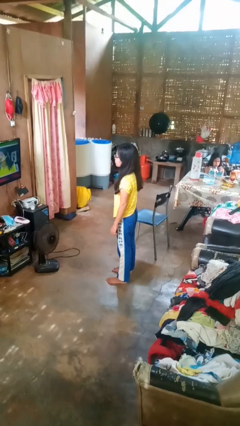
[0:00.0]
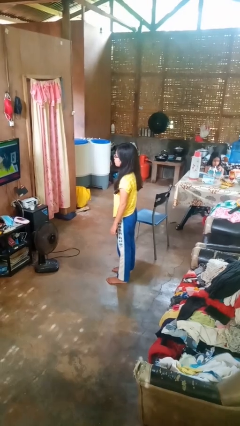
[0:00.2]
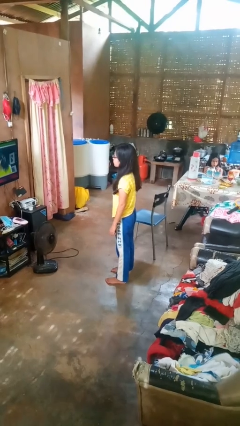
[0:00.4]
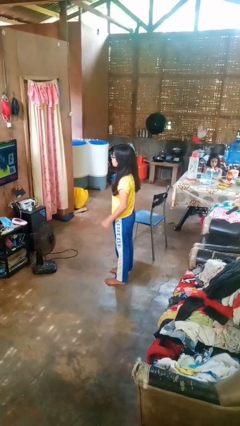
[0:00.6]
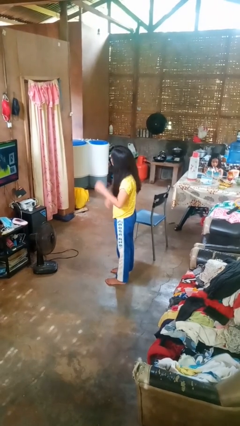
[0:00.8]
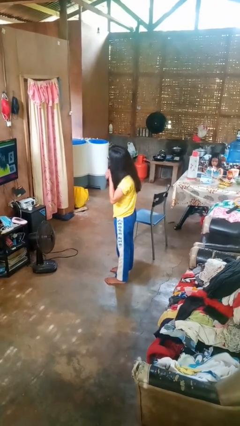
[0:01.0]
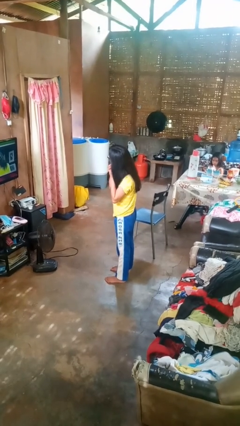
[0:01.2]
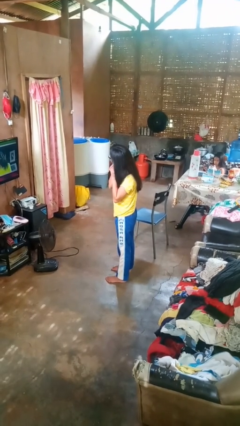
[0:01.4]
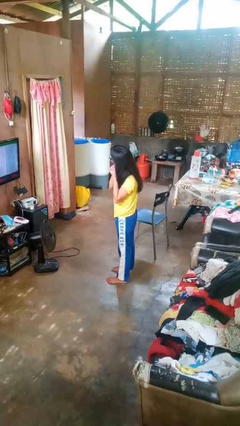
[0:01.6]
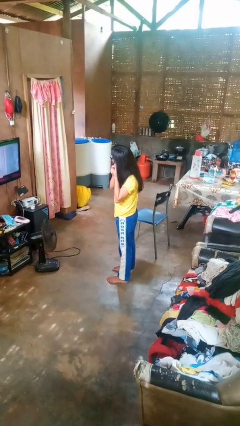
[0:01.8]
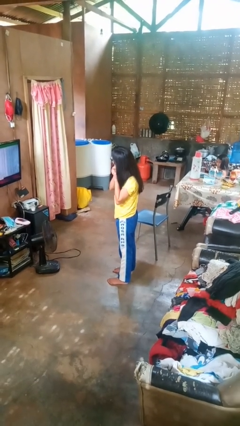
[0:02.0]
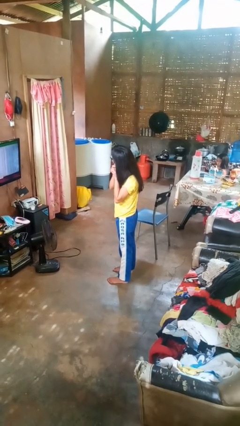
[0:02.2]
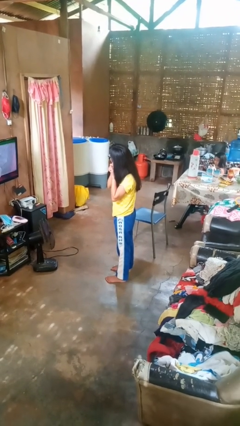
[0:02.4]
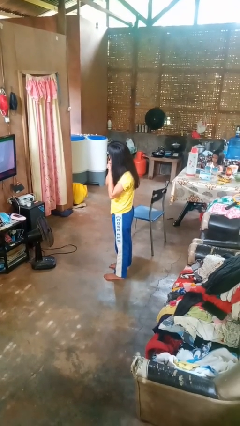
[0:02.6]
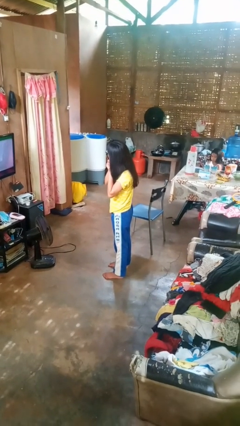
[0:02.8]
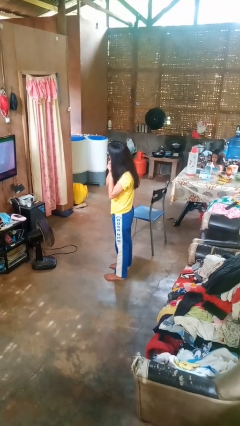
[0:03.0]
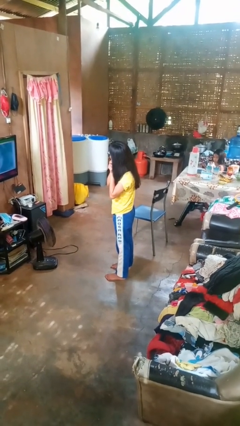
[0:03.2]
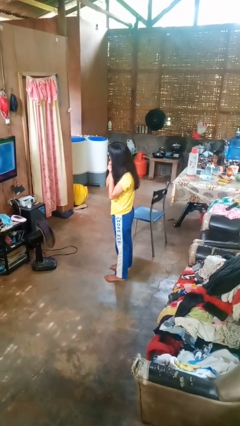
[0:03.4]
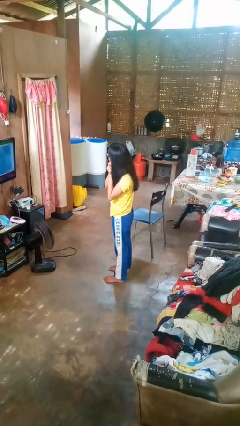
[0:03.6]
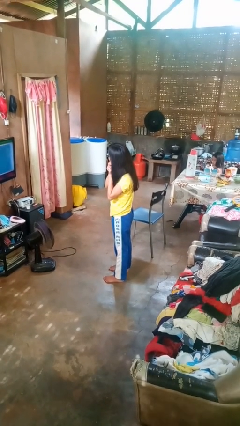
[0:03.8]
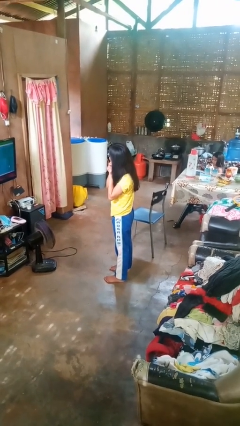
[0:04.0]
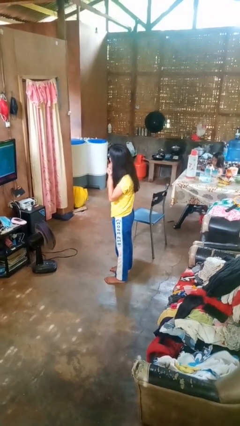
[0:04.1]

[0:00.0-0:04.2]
person puts on earrings

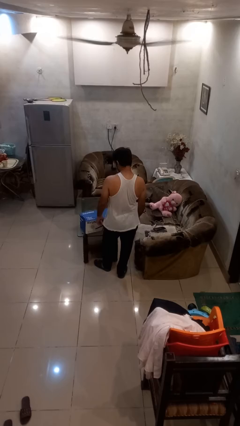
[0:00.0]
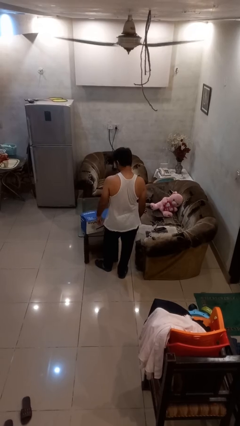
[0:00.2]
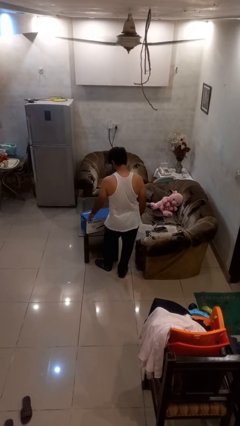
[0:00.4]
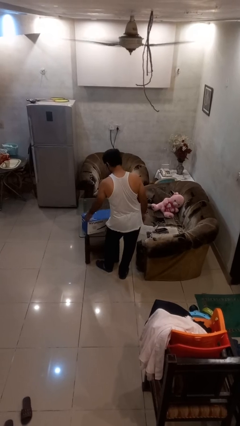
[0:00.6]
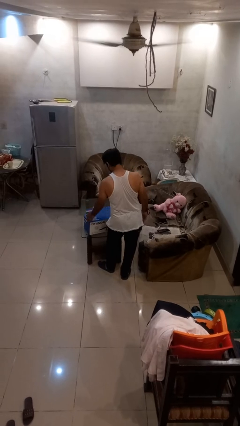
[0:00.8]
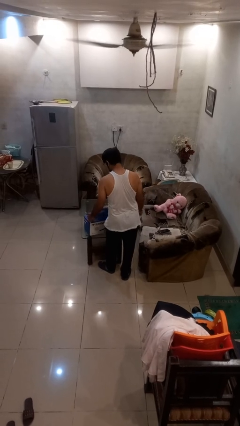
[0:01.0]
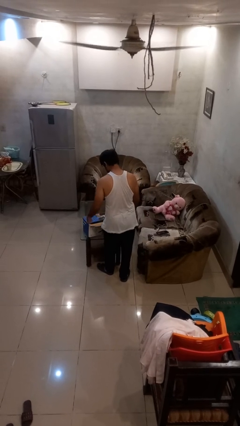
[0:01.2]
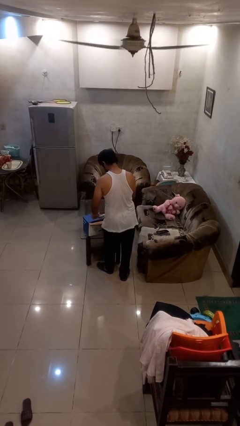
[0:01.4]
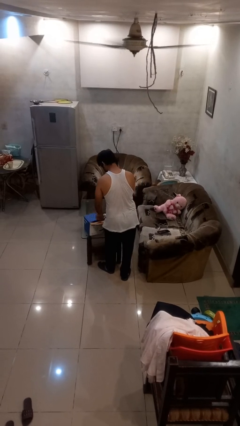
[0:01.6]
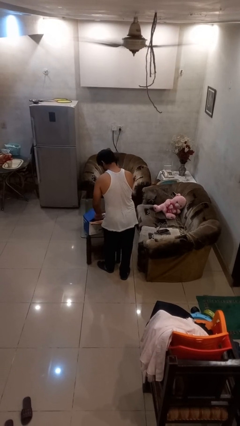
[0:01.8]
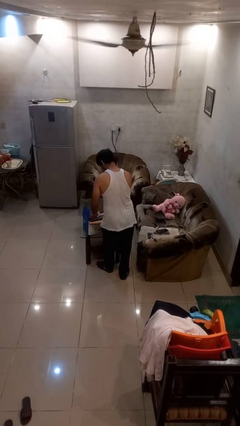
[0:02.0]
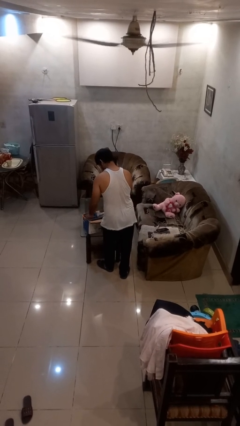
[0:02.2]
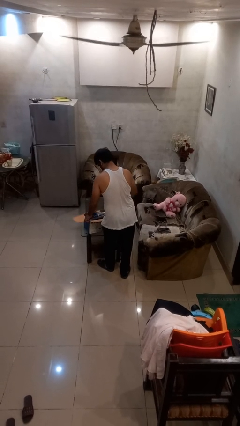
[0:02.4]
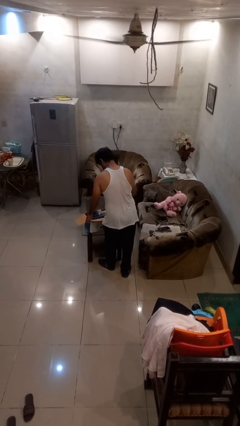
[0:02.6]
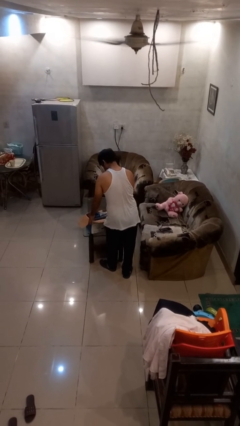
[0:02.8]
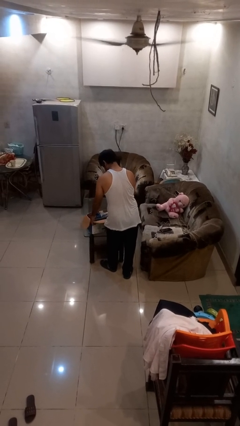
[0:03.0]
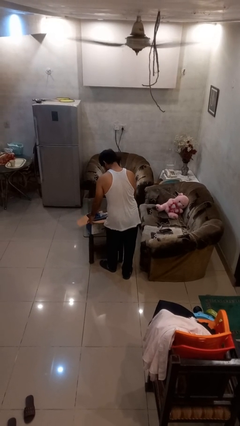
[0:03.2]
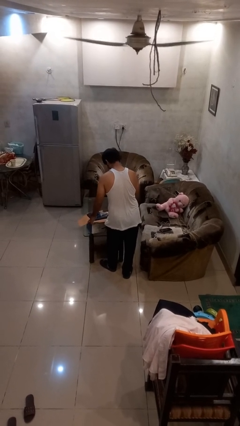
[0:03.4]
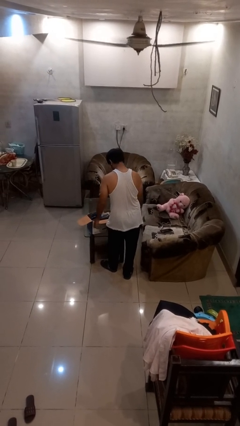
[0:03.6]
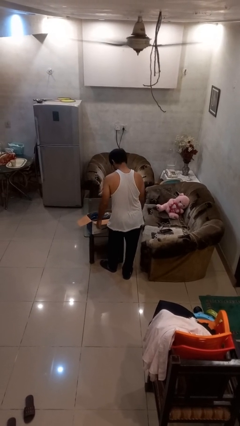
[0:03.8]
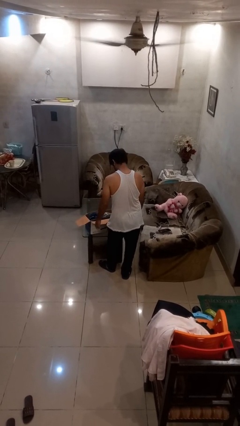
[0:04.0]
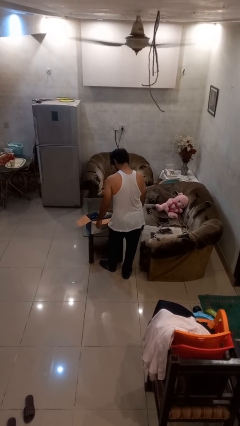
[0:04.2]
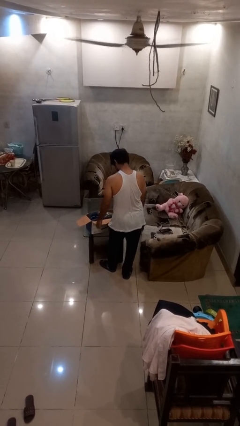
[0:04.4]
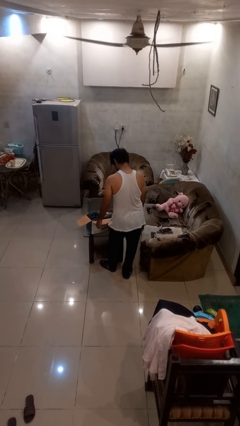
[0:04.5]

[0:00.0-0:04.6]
person opens box

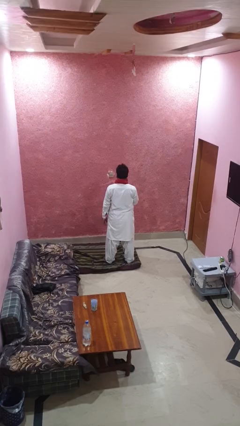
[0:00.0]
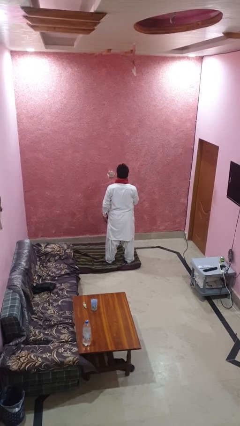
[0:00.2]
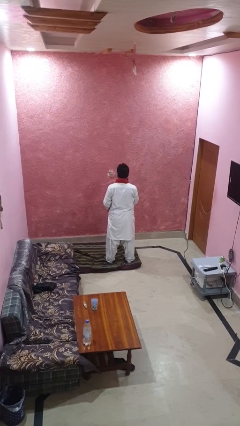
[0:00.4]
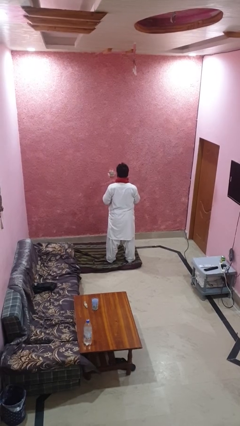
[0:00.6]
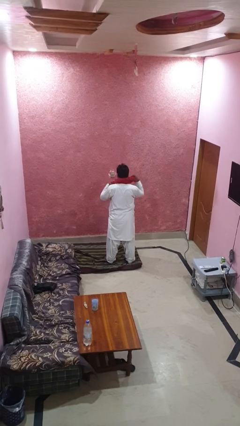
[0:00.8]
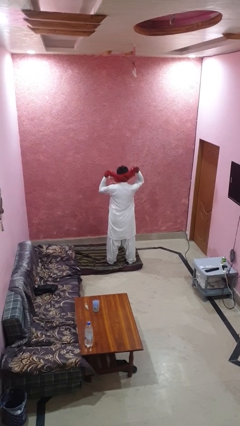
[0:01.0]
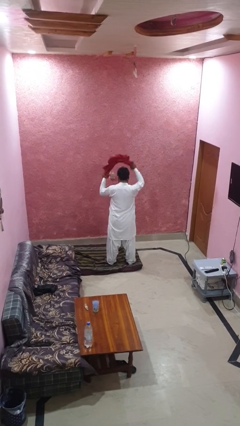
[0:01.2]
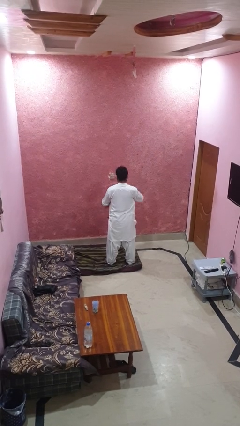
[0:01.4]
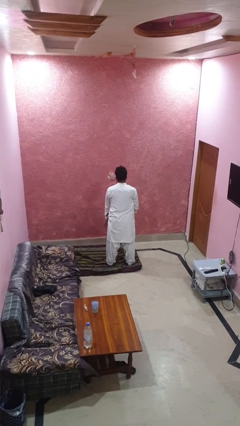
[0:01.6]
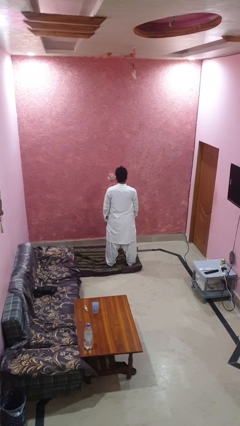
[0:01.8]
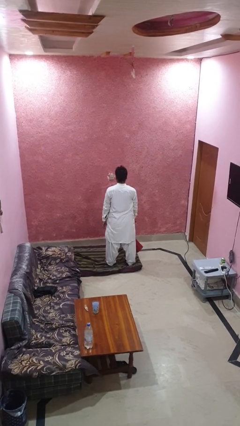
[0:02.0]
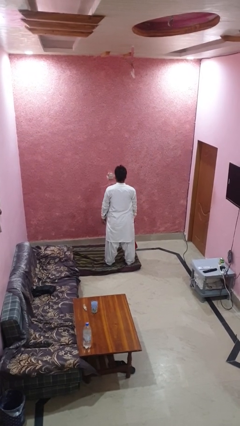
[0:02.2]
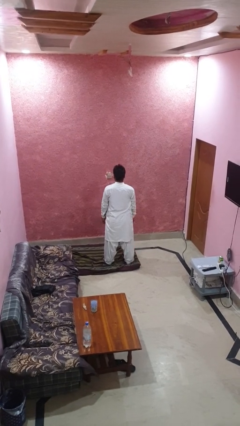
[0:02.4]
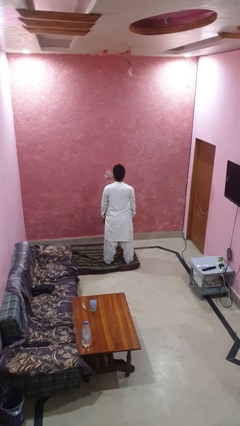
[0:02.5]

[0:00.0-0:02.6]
person takes off scarf

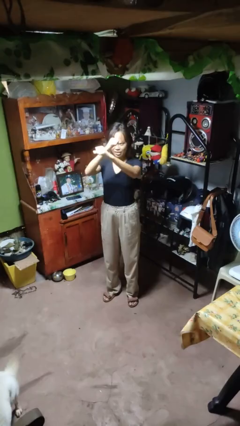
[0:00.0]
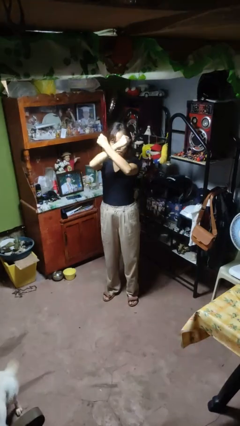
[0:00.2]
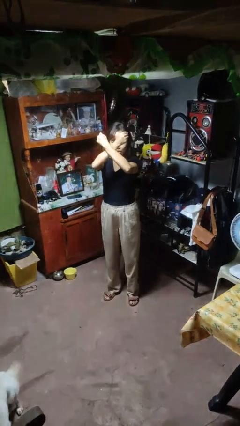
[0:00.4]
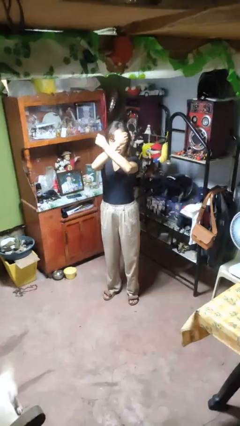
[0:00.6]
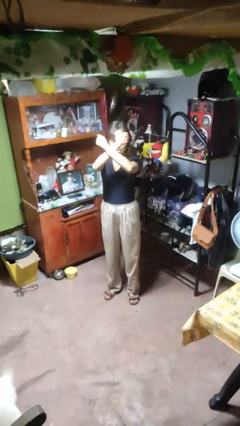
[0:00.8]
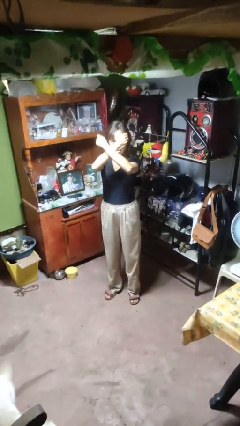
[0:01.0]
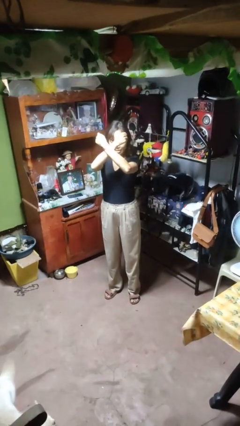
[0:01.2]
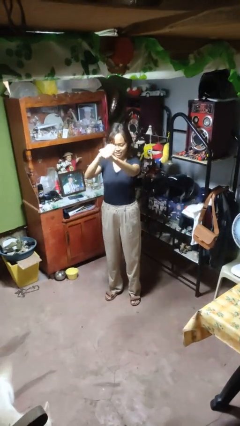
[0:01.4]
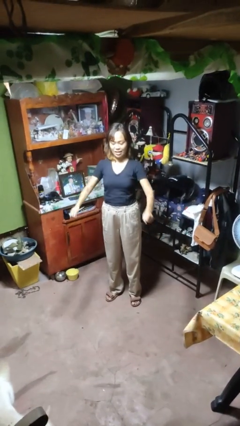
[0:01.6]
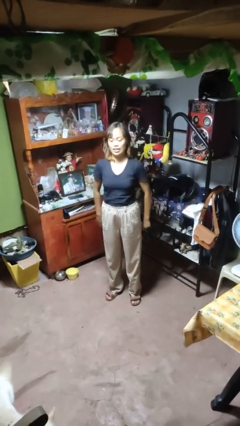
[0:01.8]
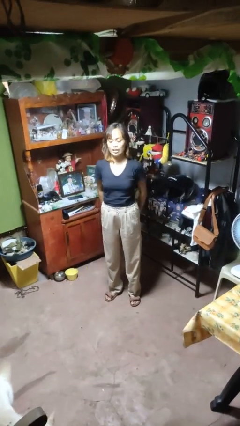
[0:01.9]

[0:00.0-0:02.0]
person gestures arms x

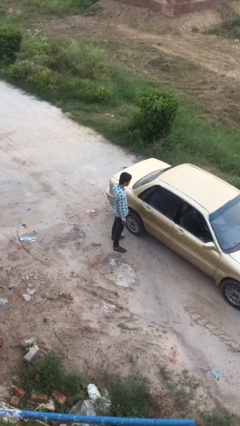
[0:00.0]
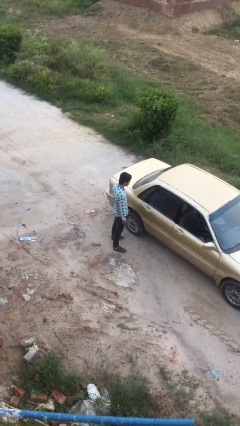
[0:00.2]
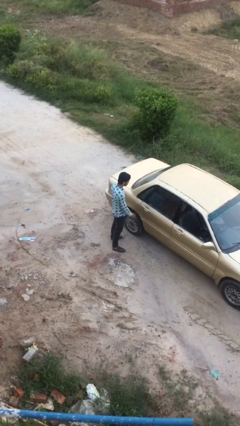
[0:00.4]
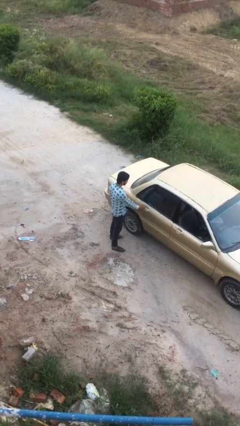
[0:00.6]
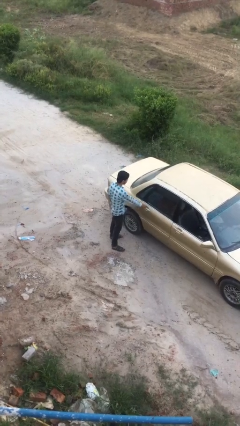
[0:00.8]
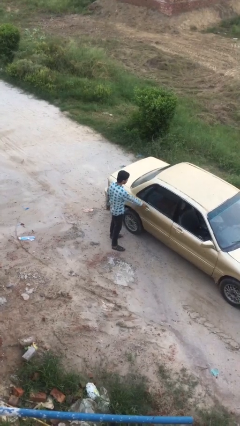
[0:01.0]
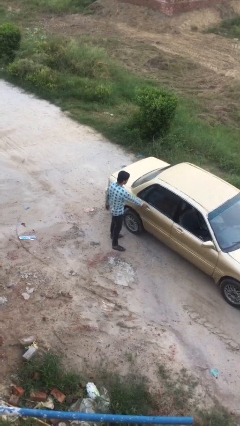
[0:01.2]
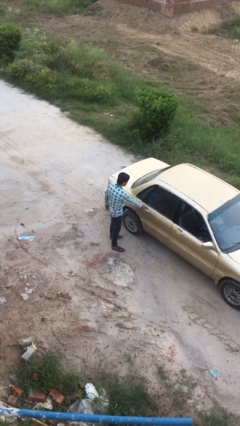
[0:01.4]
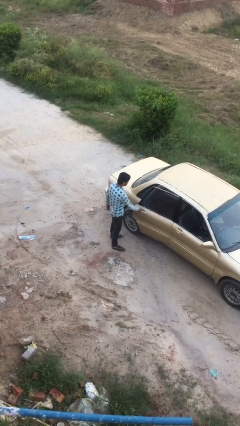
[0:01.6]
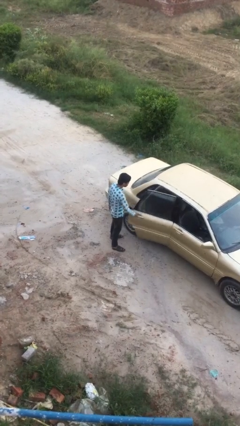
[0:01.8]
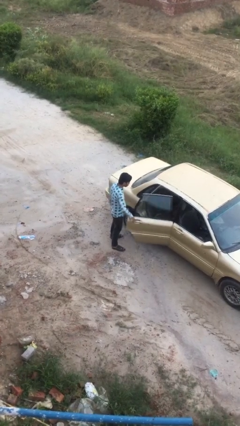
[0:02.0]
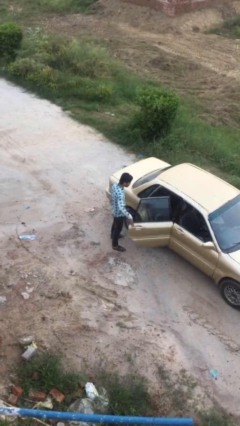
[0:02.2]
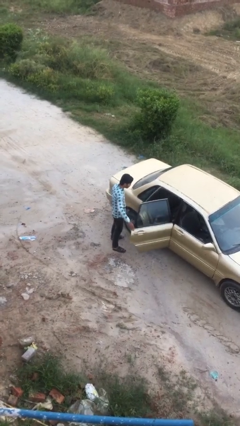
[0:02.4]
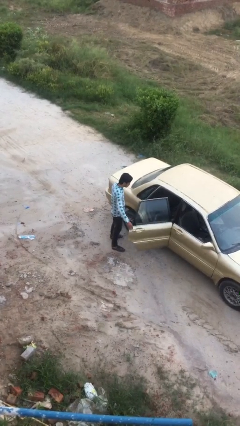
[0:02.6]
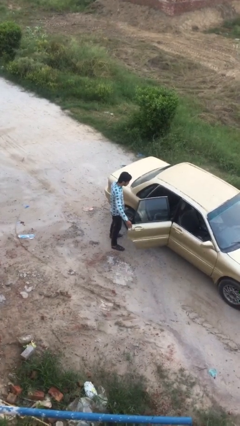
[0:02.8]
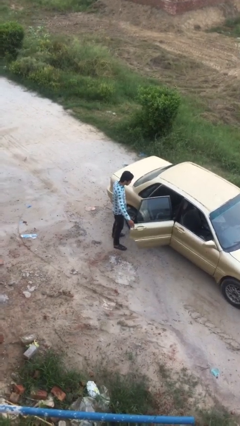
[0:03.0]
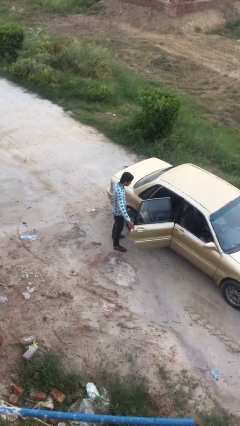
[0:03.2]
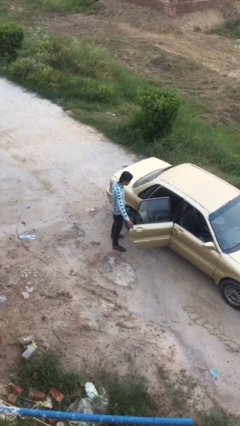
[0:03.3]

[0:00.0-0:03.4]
person opens car door

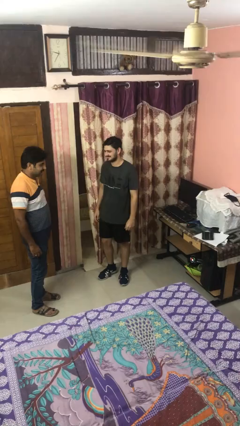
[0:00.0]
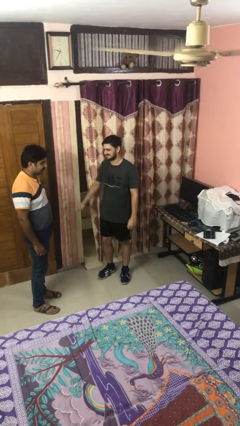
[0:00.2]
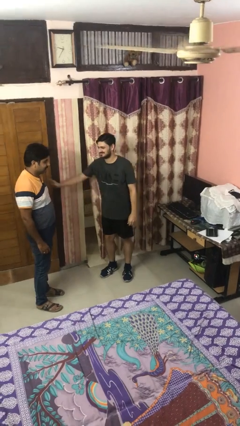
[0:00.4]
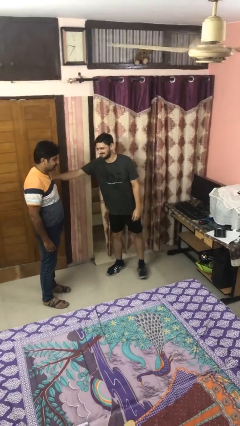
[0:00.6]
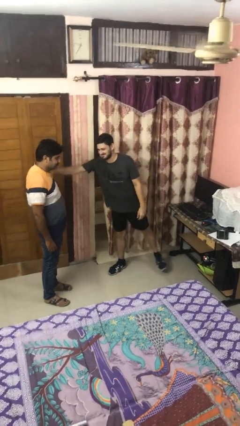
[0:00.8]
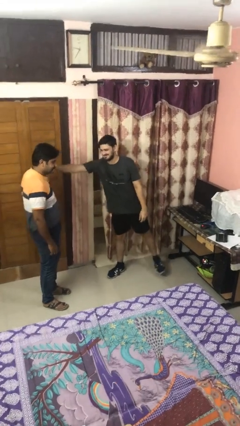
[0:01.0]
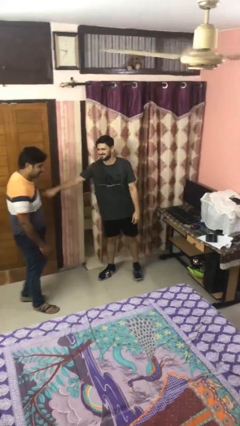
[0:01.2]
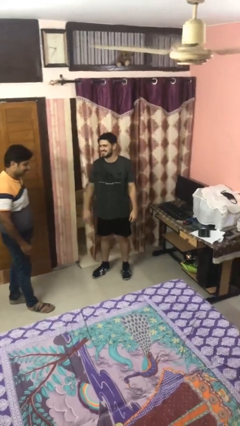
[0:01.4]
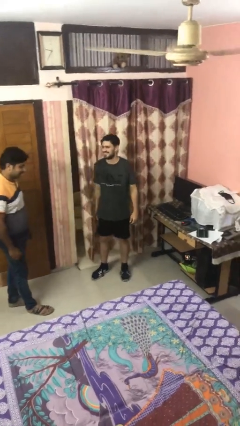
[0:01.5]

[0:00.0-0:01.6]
person shoves person
